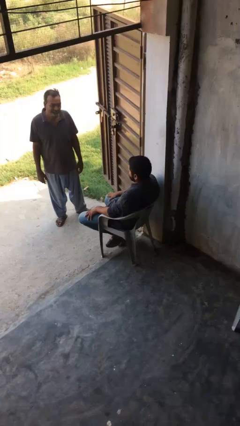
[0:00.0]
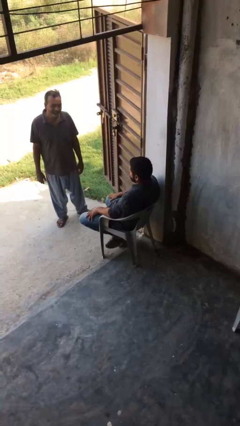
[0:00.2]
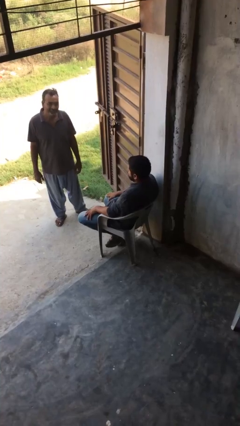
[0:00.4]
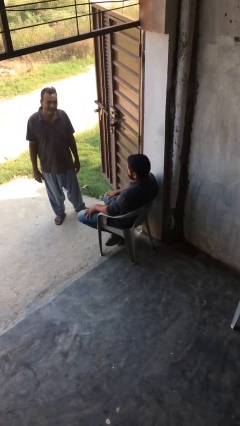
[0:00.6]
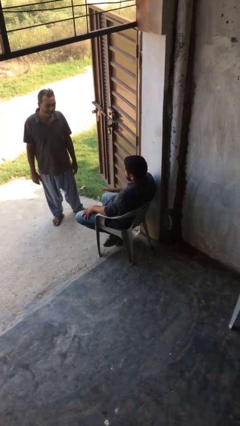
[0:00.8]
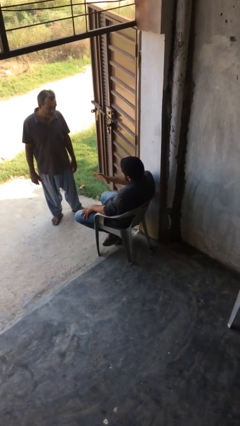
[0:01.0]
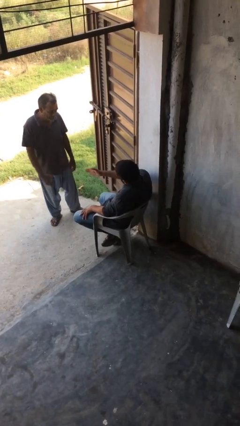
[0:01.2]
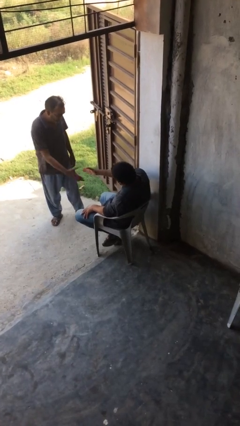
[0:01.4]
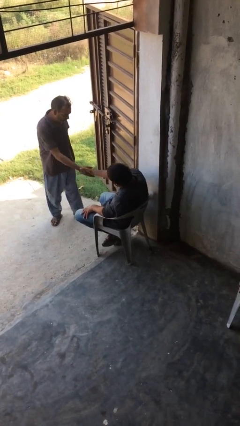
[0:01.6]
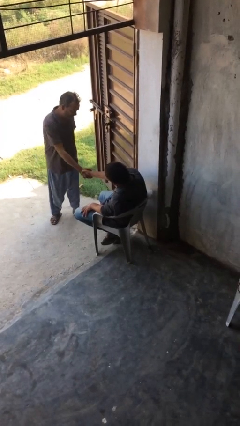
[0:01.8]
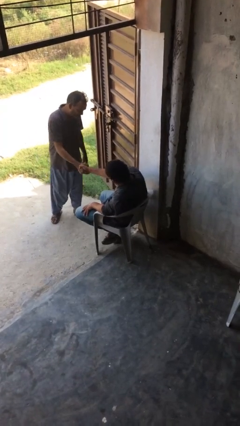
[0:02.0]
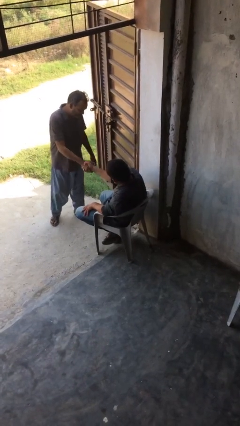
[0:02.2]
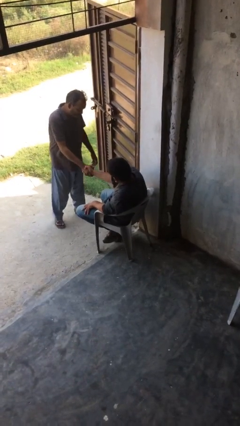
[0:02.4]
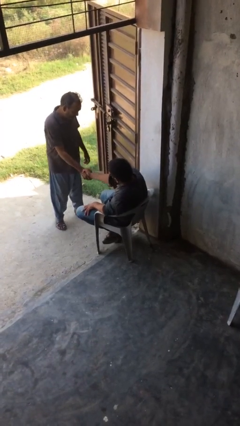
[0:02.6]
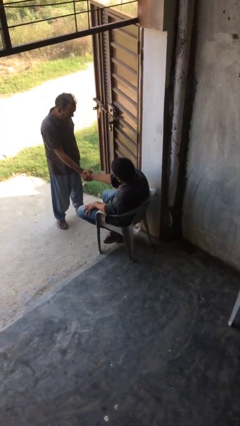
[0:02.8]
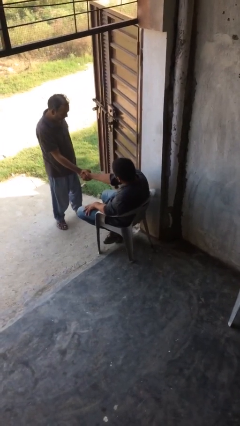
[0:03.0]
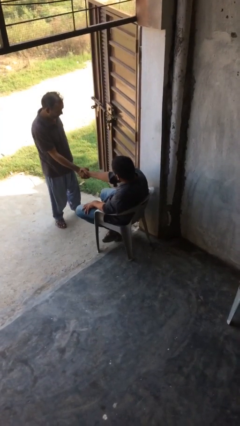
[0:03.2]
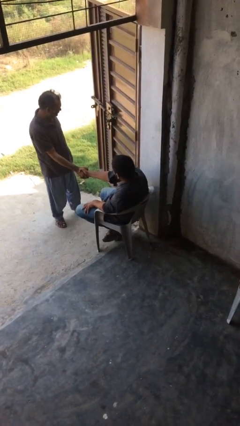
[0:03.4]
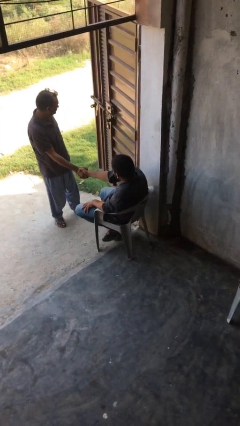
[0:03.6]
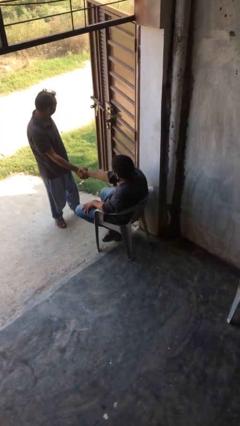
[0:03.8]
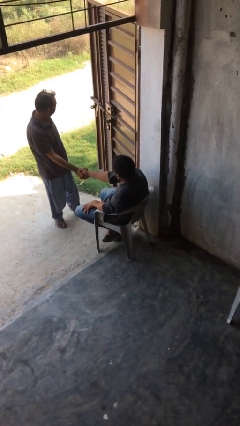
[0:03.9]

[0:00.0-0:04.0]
person shakes hand

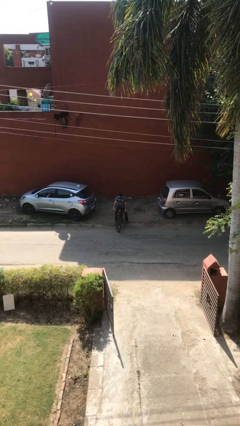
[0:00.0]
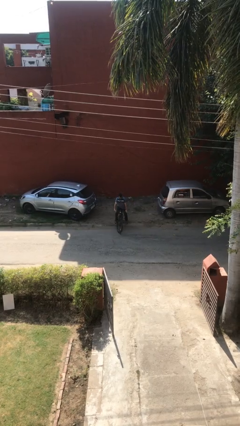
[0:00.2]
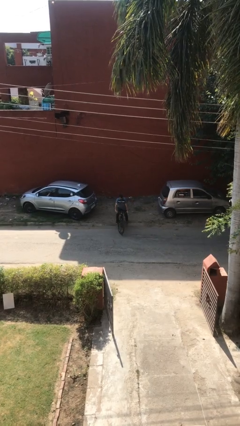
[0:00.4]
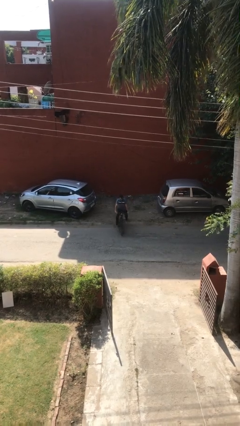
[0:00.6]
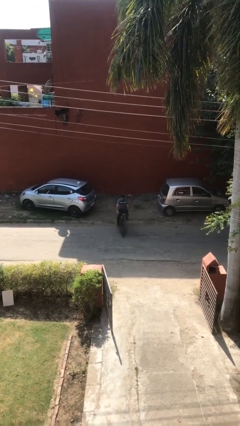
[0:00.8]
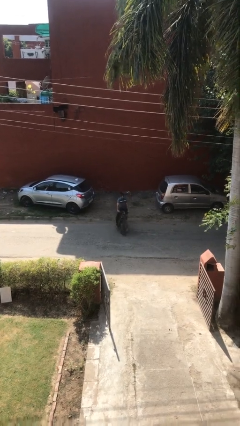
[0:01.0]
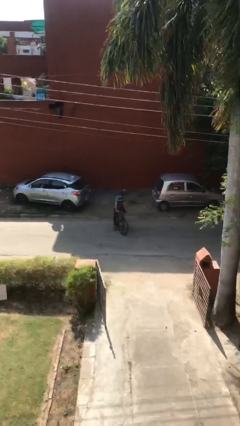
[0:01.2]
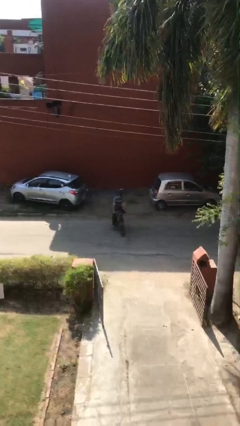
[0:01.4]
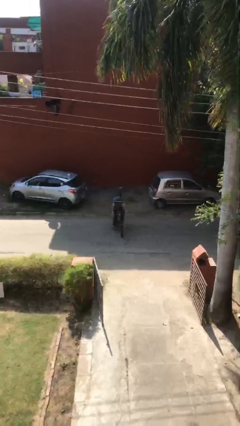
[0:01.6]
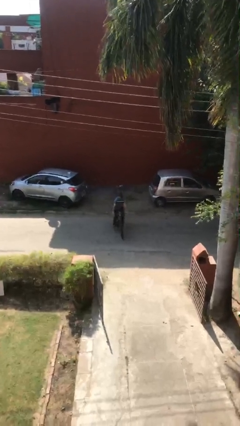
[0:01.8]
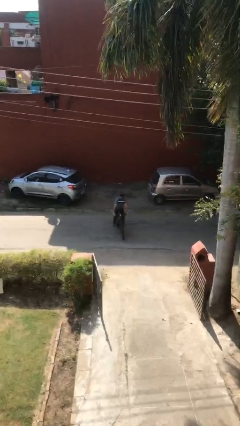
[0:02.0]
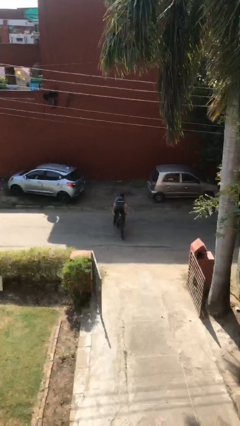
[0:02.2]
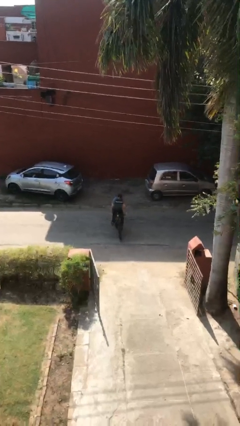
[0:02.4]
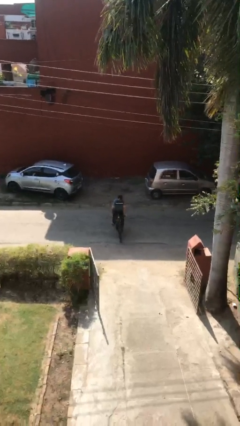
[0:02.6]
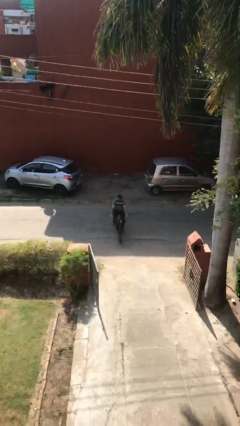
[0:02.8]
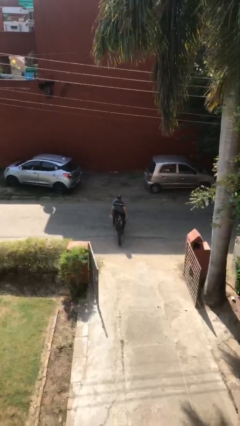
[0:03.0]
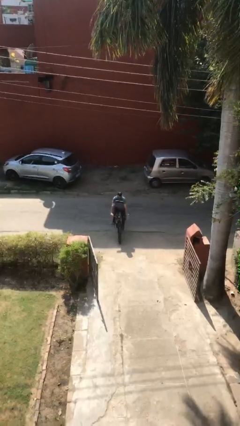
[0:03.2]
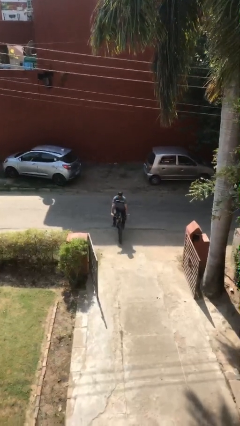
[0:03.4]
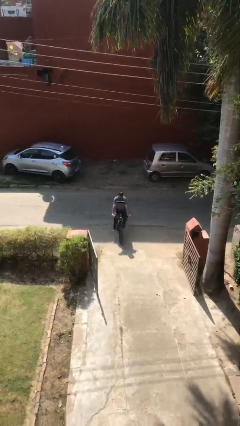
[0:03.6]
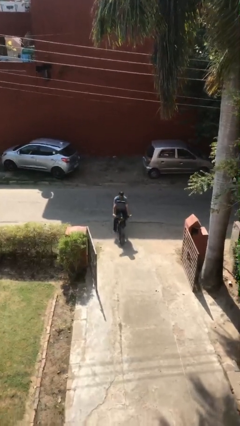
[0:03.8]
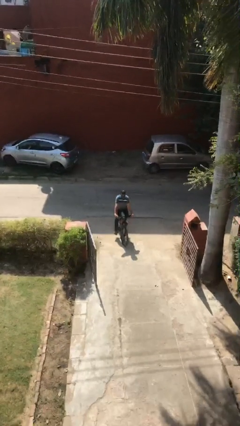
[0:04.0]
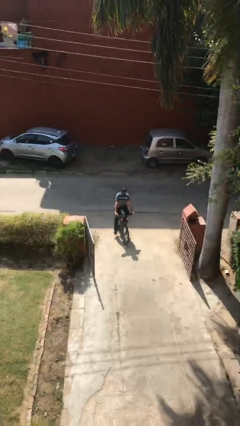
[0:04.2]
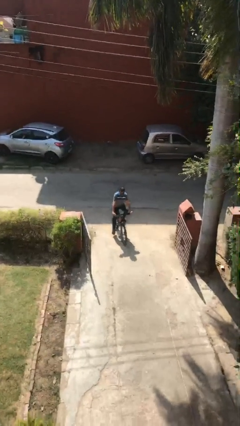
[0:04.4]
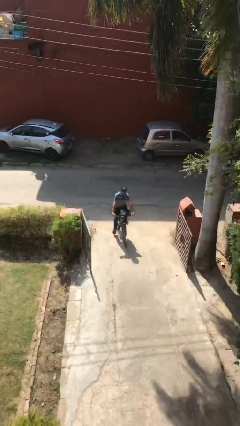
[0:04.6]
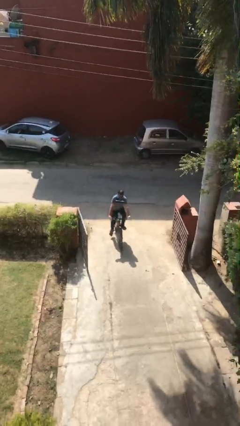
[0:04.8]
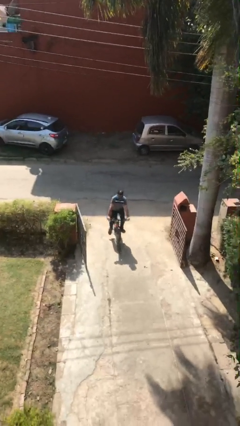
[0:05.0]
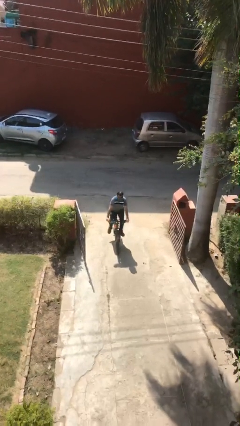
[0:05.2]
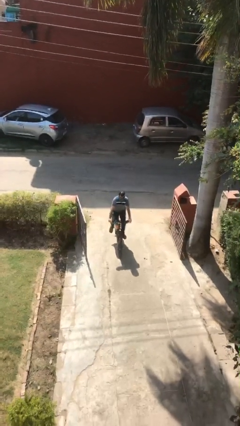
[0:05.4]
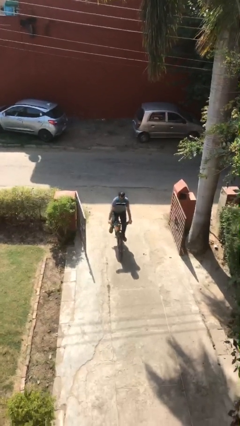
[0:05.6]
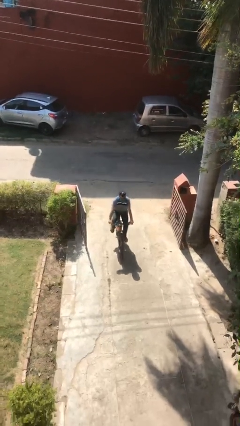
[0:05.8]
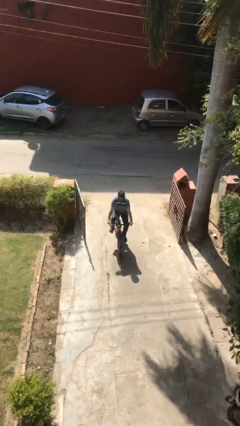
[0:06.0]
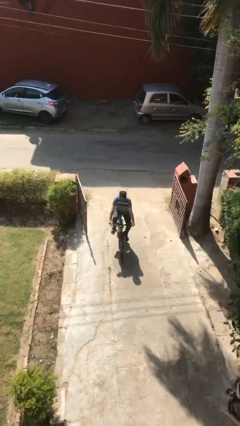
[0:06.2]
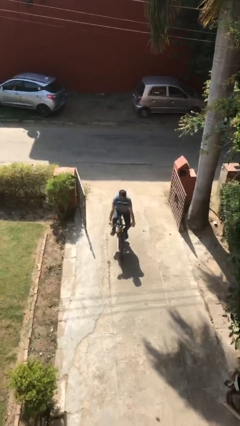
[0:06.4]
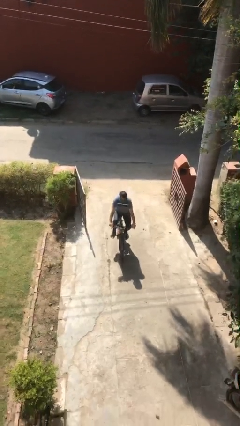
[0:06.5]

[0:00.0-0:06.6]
person rides bicycle

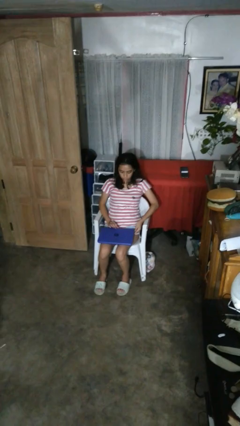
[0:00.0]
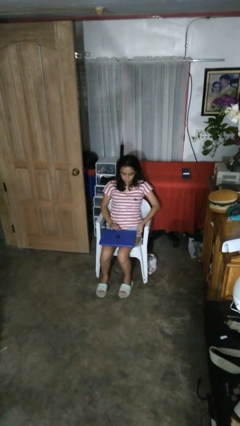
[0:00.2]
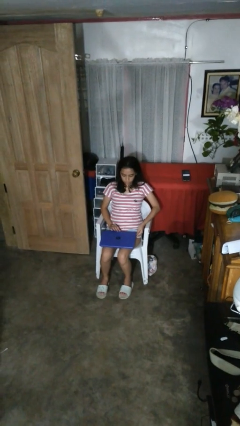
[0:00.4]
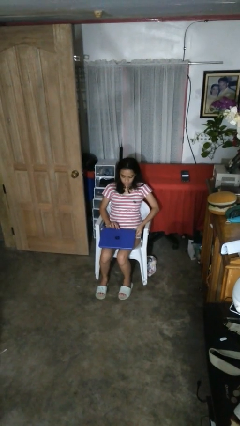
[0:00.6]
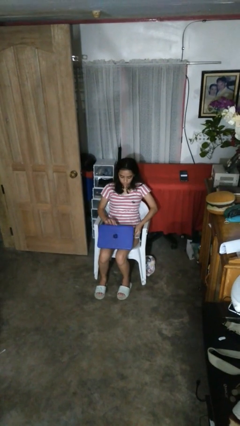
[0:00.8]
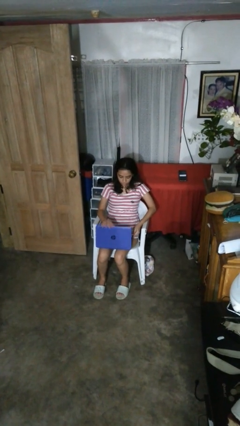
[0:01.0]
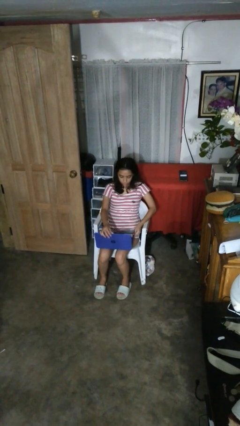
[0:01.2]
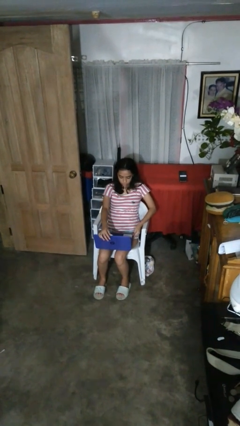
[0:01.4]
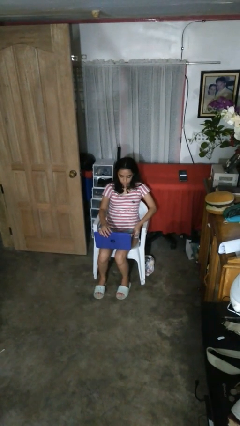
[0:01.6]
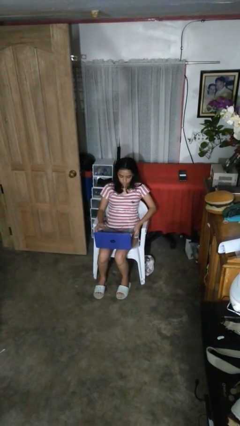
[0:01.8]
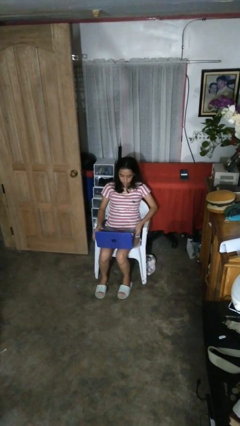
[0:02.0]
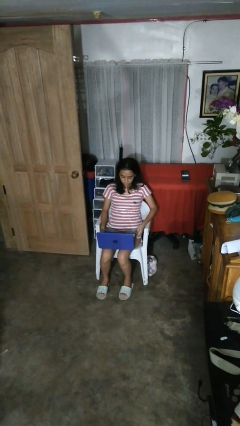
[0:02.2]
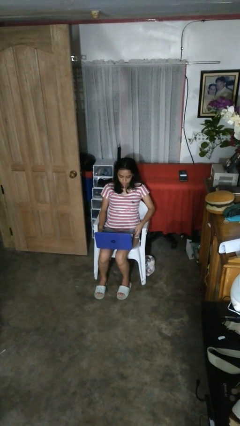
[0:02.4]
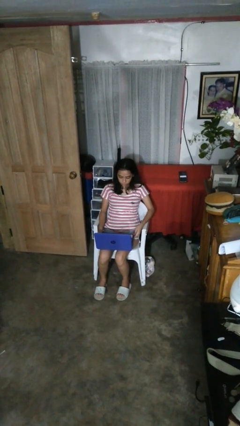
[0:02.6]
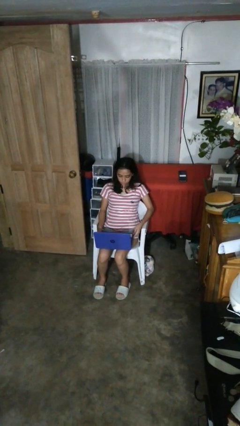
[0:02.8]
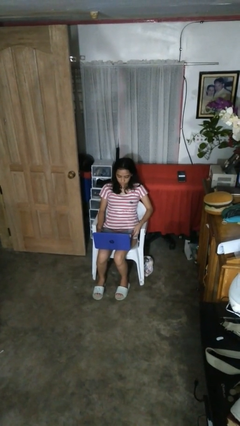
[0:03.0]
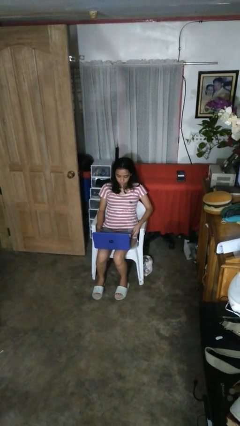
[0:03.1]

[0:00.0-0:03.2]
person opens laptop

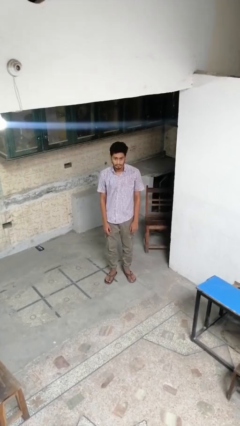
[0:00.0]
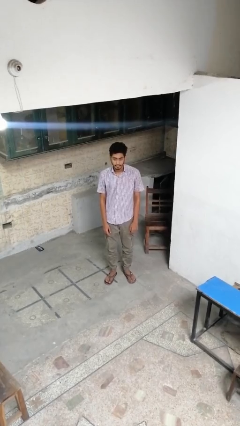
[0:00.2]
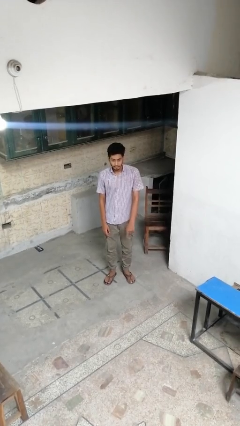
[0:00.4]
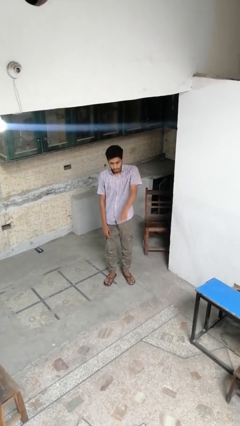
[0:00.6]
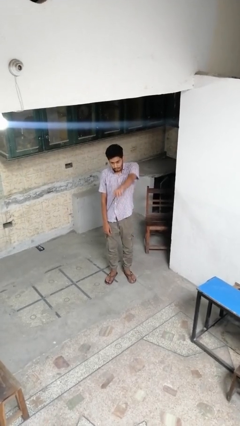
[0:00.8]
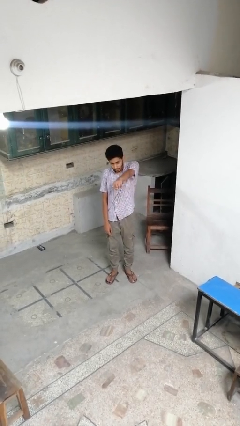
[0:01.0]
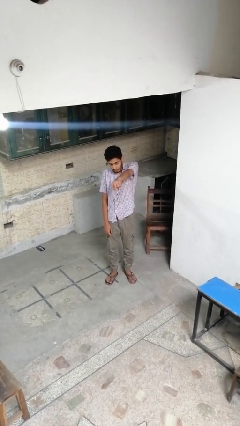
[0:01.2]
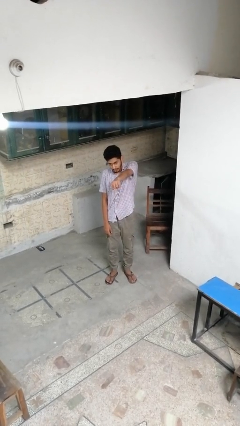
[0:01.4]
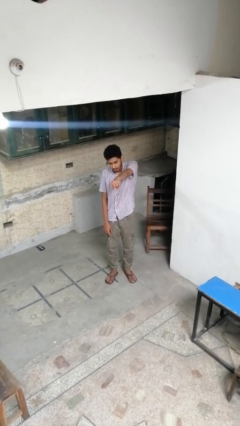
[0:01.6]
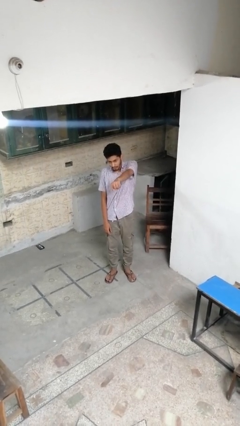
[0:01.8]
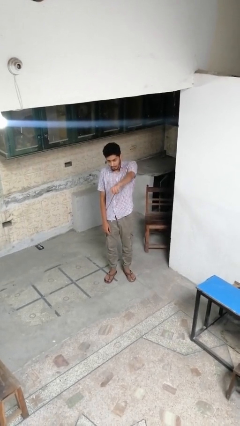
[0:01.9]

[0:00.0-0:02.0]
person points at person

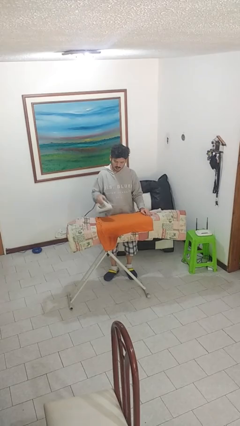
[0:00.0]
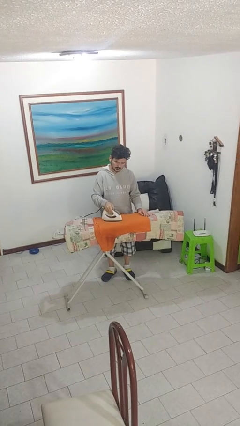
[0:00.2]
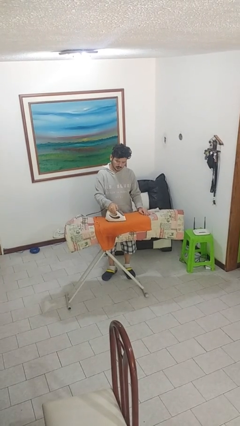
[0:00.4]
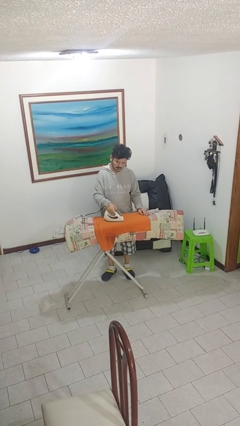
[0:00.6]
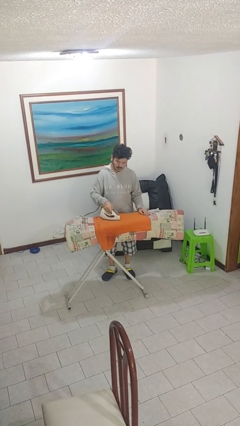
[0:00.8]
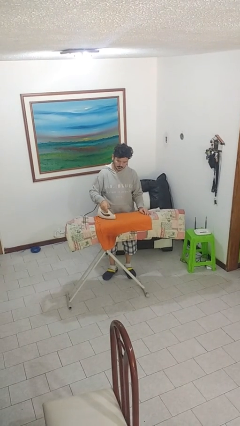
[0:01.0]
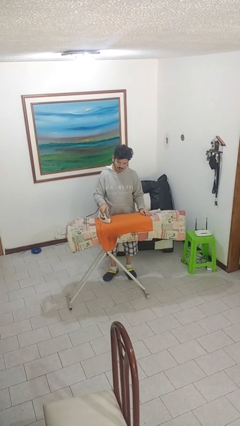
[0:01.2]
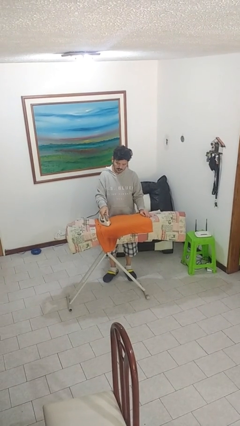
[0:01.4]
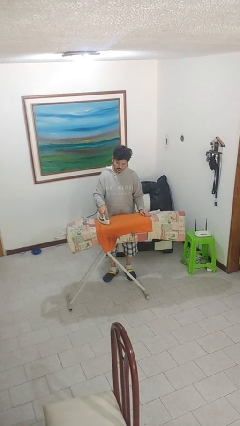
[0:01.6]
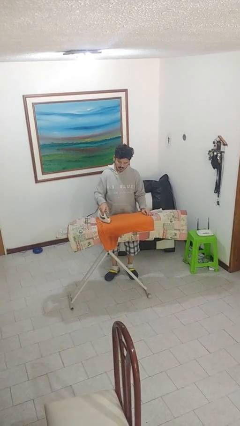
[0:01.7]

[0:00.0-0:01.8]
person irons clothes
